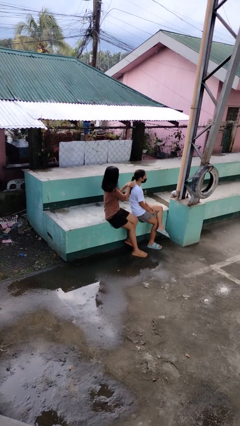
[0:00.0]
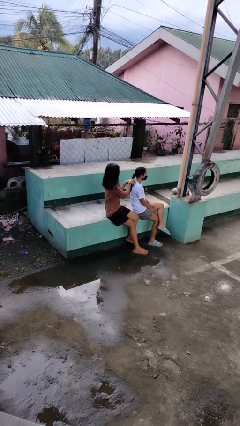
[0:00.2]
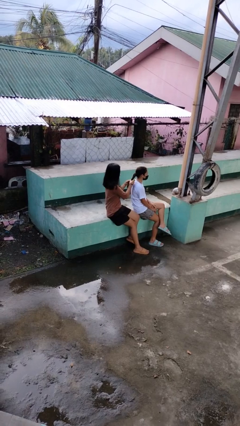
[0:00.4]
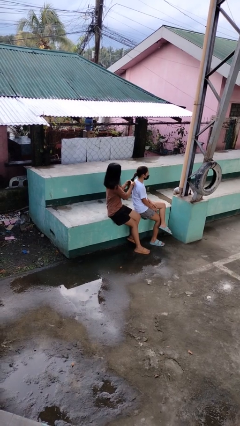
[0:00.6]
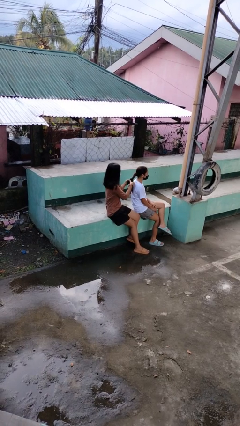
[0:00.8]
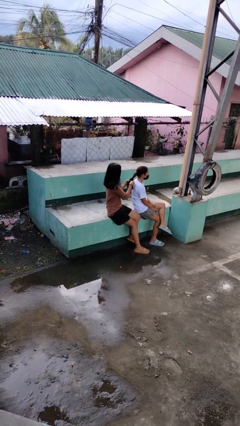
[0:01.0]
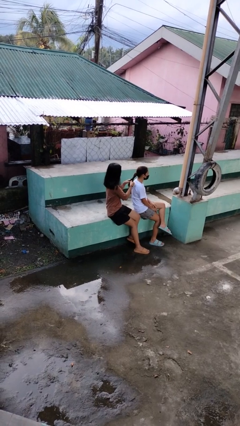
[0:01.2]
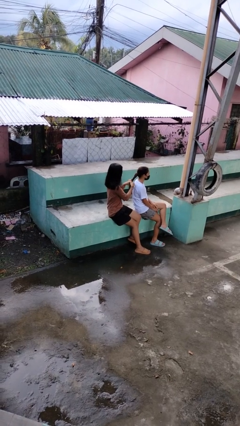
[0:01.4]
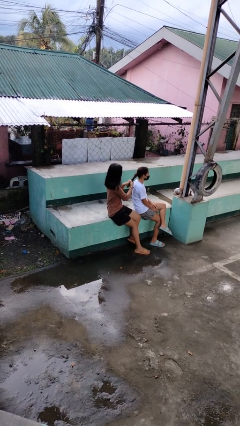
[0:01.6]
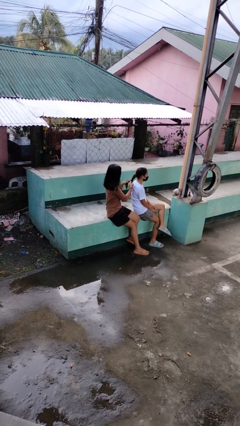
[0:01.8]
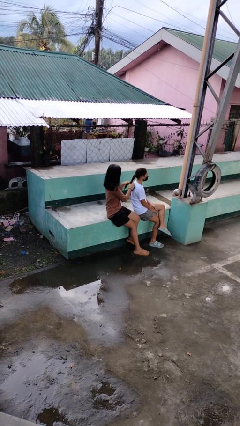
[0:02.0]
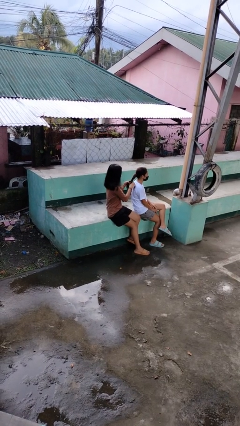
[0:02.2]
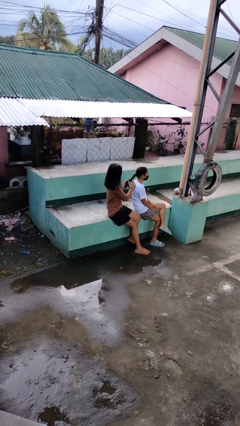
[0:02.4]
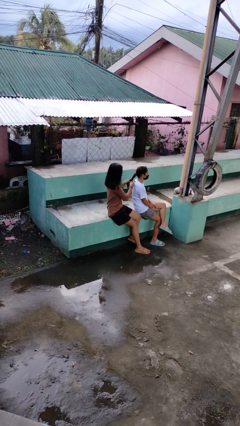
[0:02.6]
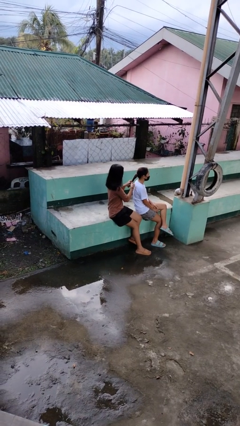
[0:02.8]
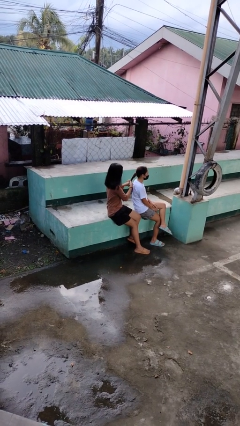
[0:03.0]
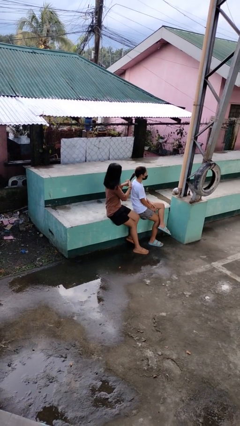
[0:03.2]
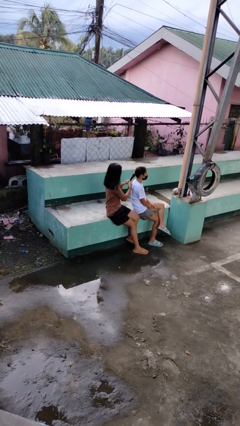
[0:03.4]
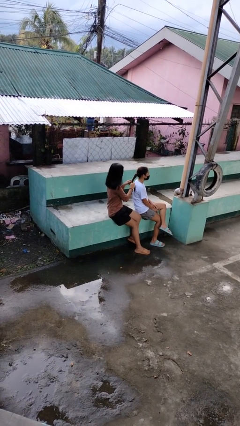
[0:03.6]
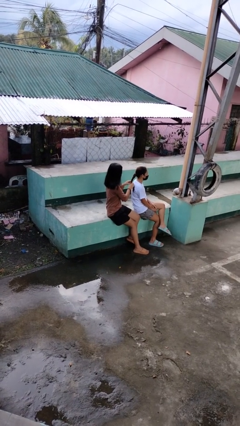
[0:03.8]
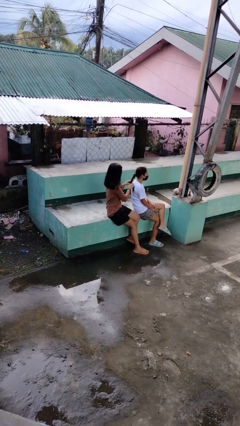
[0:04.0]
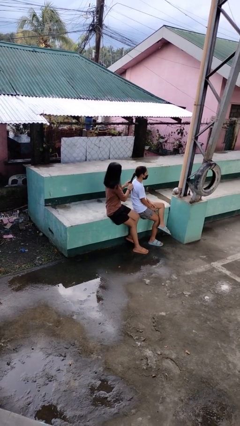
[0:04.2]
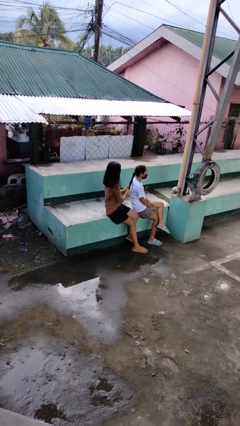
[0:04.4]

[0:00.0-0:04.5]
person braids hair of person

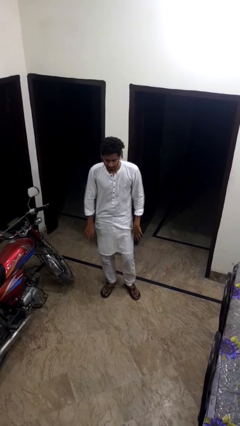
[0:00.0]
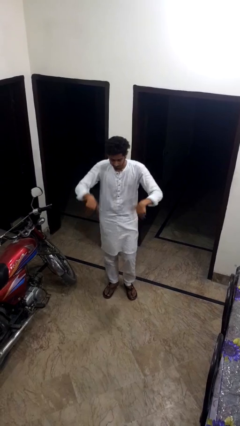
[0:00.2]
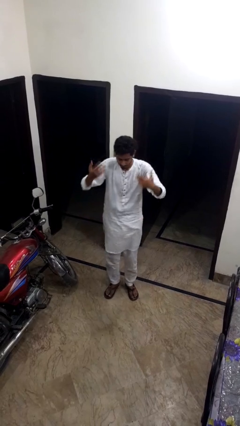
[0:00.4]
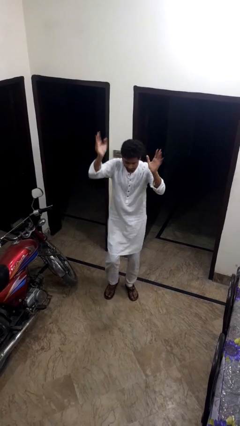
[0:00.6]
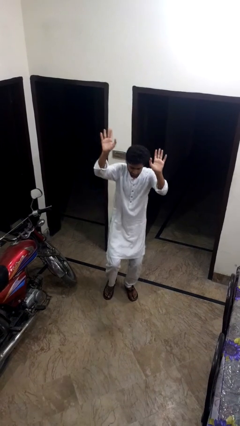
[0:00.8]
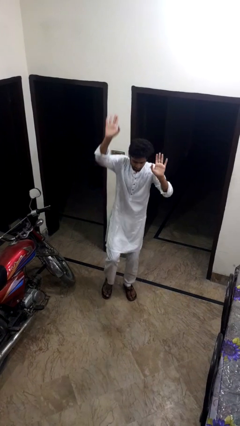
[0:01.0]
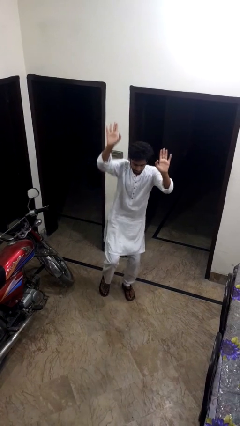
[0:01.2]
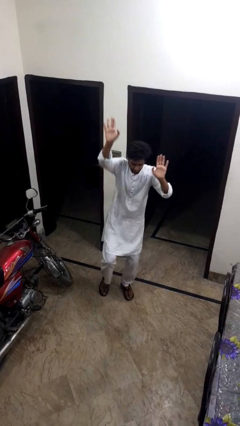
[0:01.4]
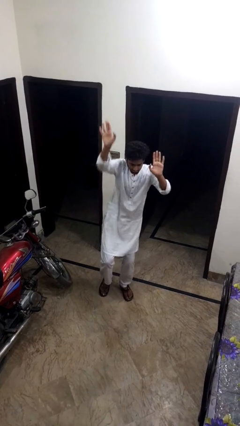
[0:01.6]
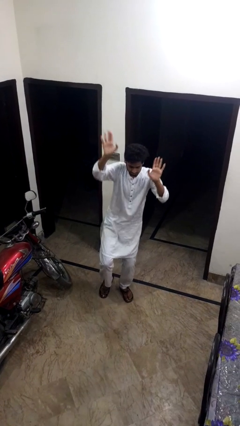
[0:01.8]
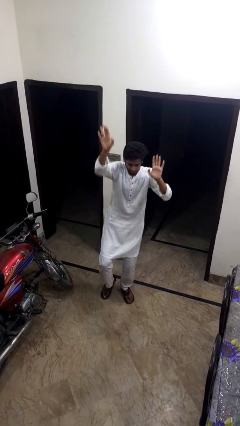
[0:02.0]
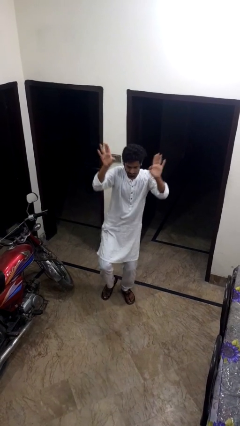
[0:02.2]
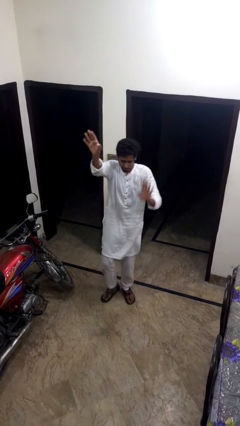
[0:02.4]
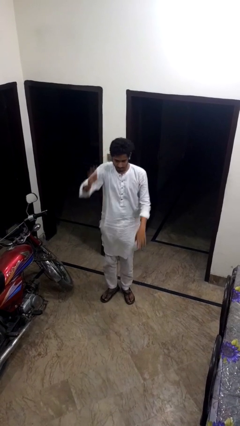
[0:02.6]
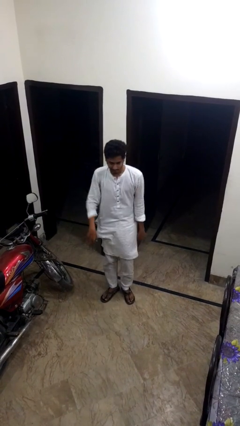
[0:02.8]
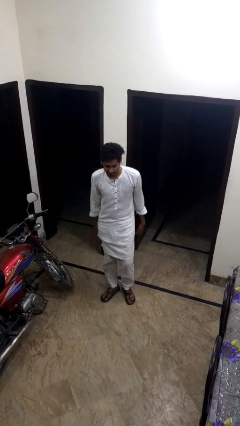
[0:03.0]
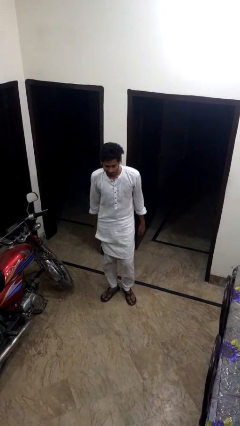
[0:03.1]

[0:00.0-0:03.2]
person dances in place

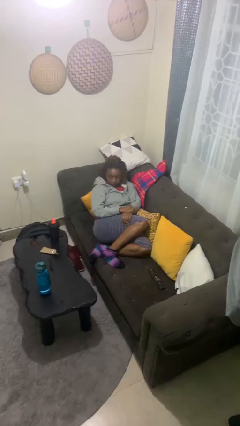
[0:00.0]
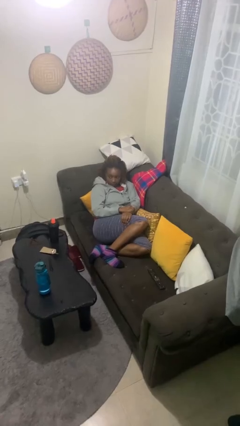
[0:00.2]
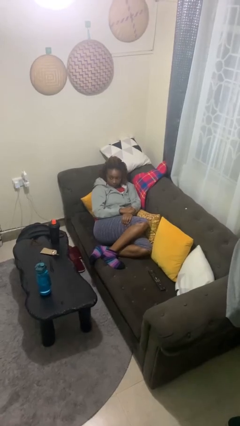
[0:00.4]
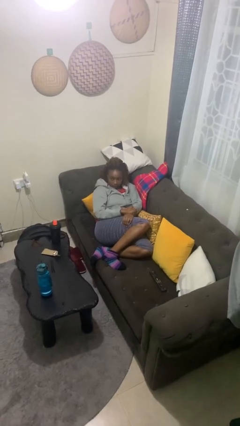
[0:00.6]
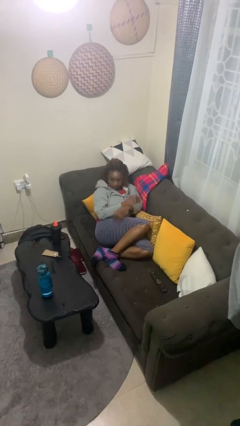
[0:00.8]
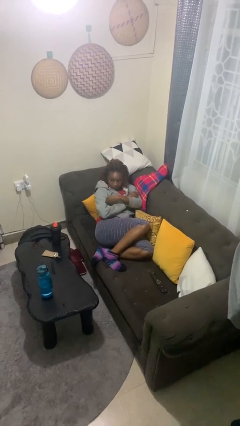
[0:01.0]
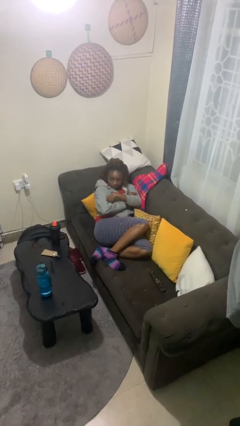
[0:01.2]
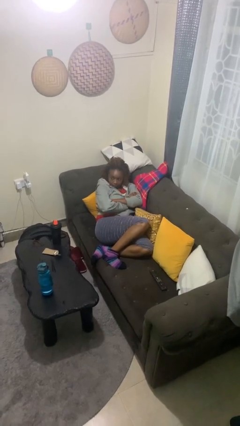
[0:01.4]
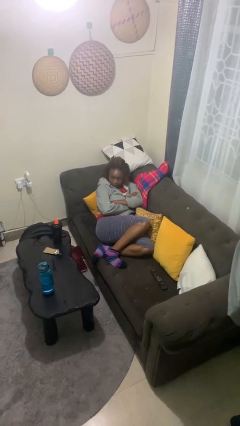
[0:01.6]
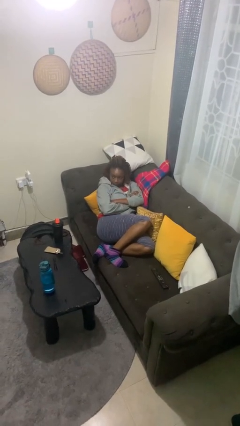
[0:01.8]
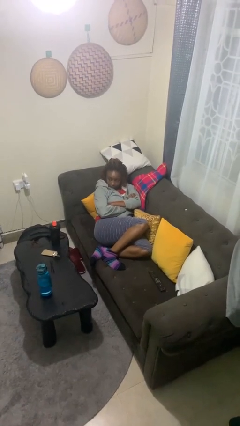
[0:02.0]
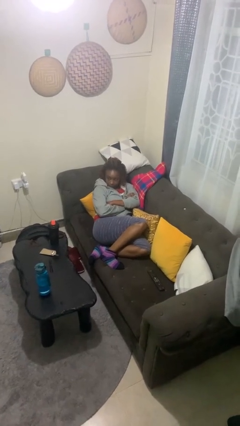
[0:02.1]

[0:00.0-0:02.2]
person crosses arms

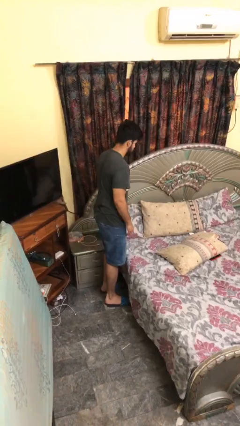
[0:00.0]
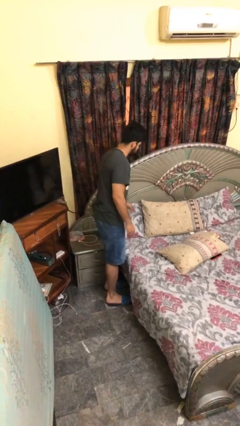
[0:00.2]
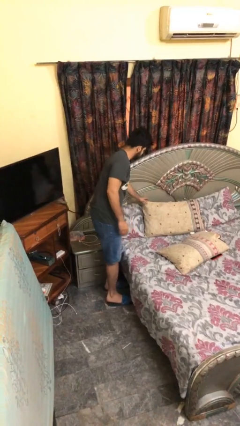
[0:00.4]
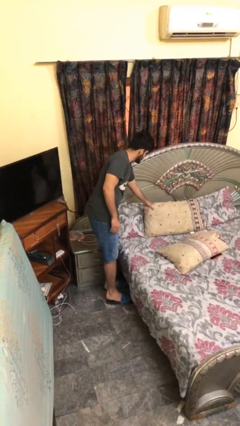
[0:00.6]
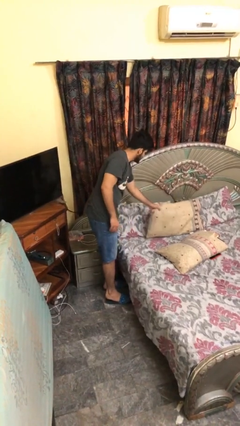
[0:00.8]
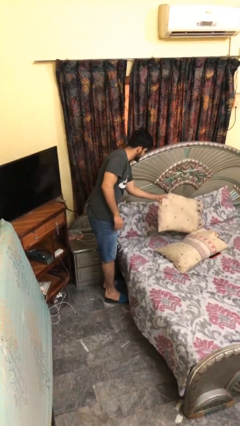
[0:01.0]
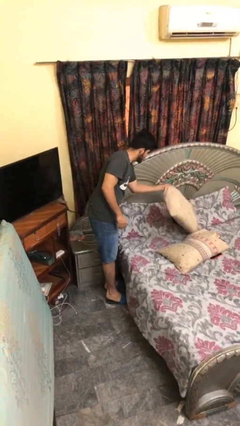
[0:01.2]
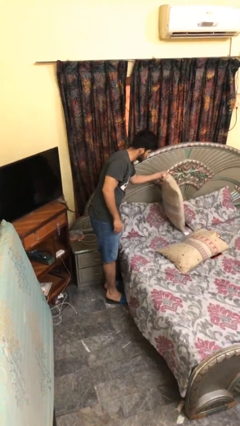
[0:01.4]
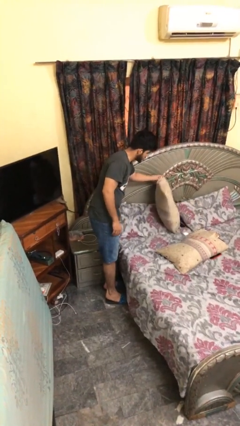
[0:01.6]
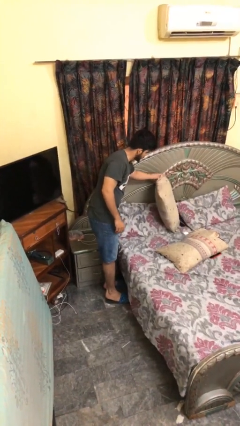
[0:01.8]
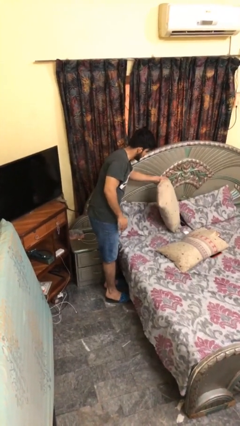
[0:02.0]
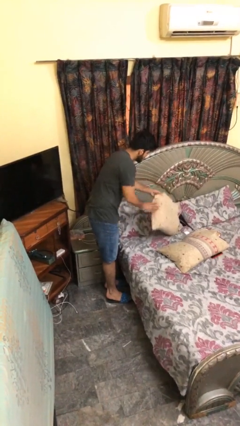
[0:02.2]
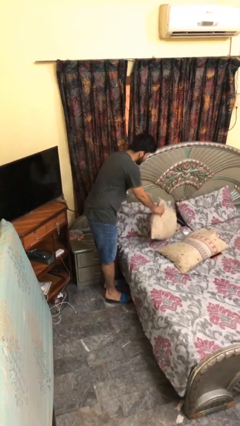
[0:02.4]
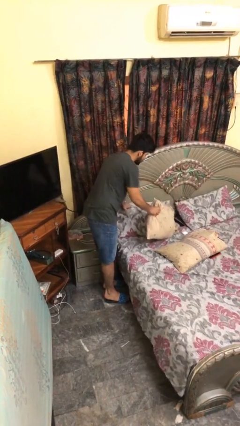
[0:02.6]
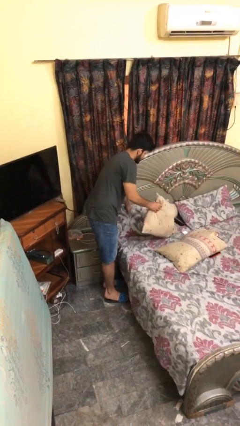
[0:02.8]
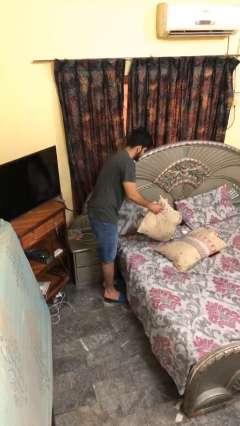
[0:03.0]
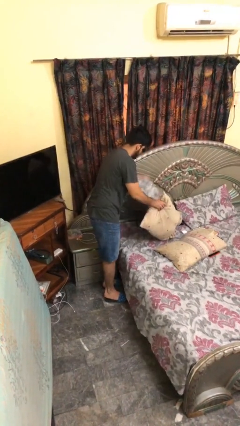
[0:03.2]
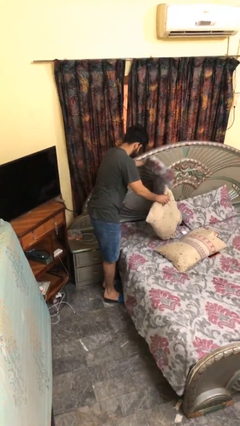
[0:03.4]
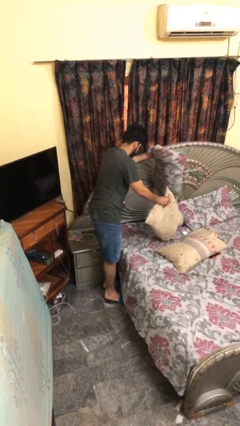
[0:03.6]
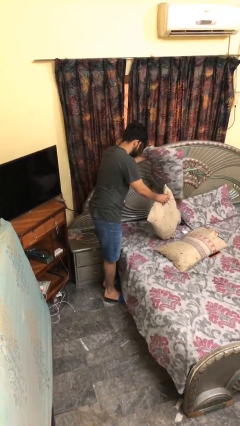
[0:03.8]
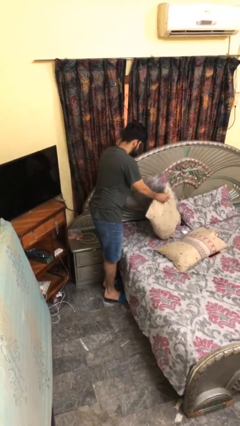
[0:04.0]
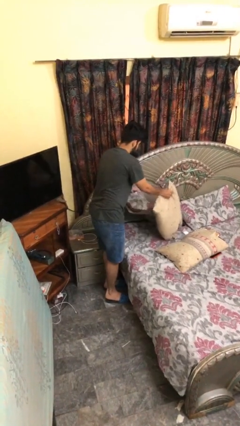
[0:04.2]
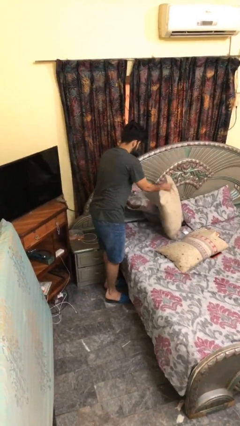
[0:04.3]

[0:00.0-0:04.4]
person searches under bed

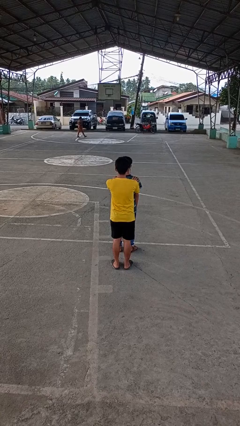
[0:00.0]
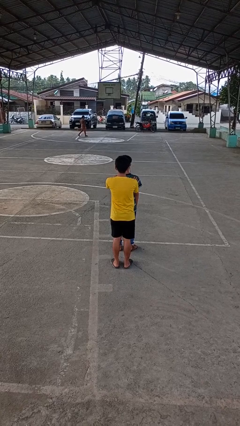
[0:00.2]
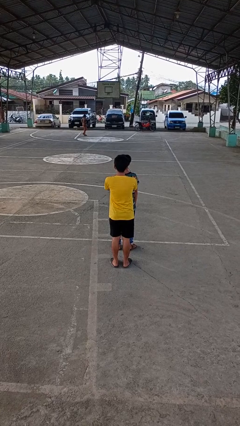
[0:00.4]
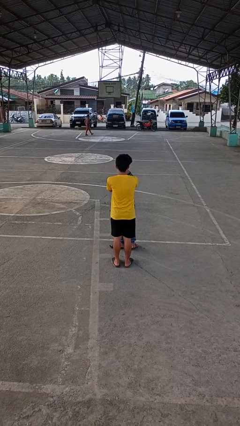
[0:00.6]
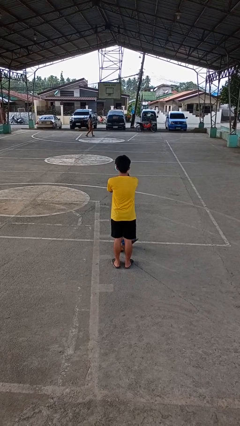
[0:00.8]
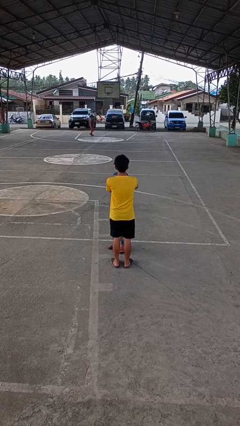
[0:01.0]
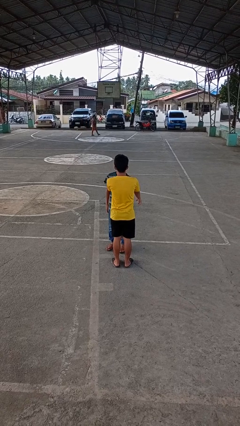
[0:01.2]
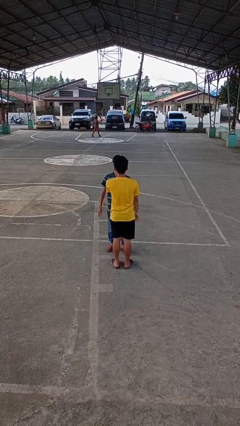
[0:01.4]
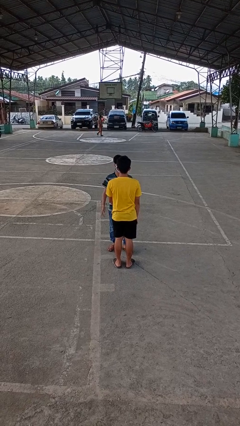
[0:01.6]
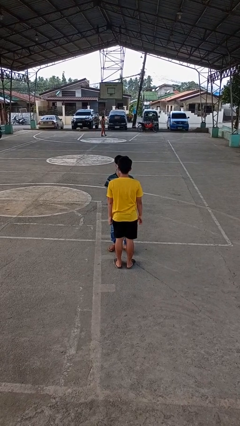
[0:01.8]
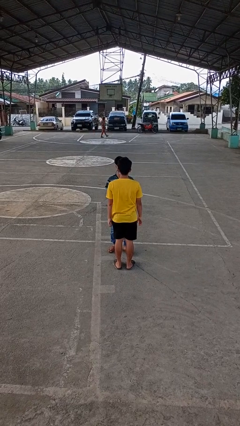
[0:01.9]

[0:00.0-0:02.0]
person spins person around

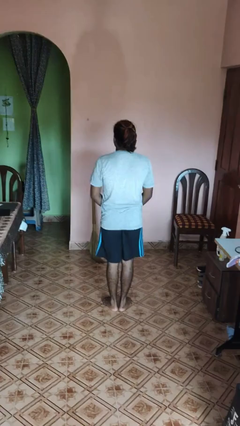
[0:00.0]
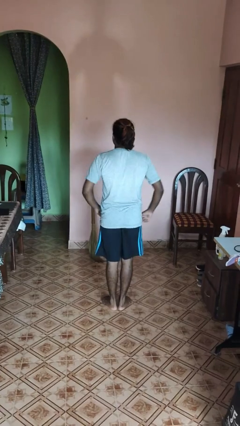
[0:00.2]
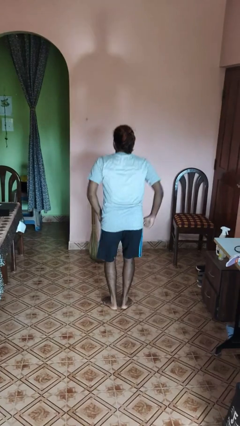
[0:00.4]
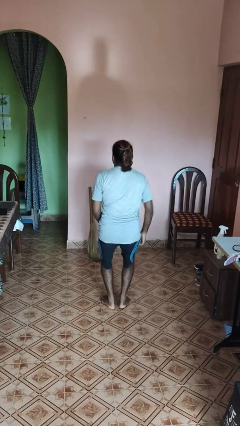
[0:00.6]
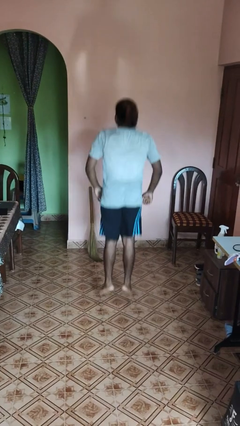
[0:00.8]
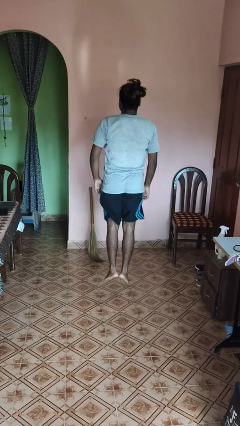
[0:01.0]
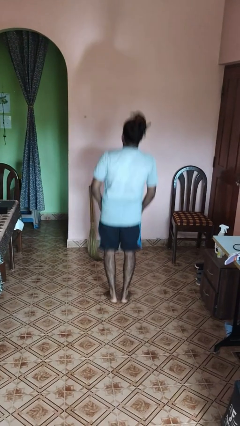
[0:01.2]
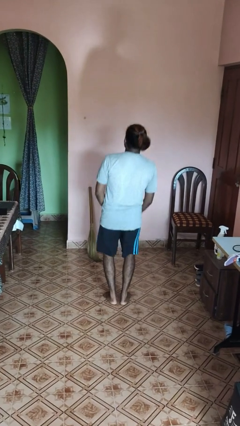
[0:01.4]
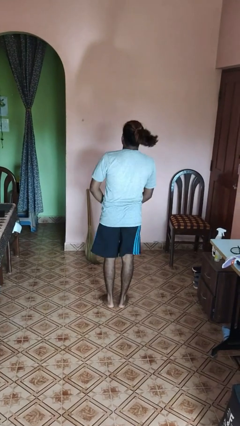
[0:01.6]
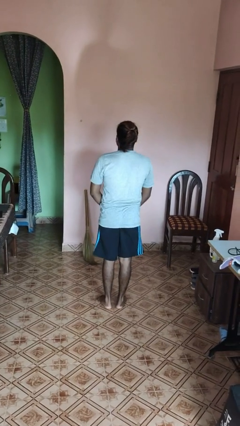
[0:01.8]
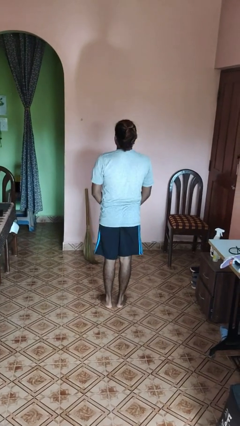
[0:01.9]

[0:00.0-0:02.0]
person jumps
